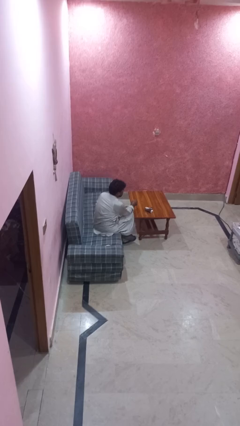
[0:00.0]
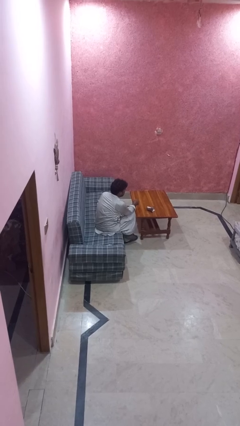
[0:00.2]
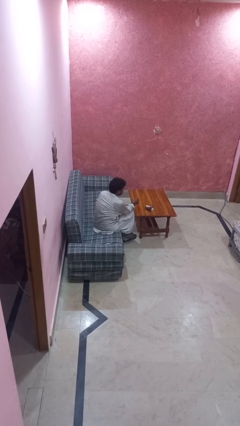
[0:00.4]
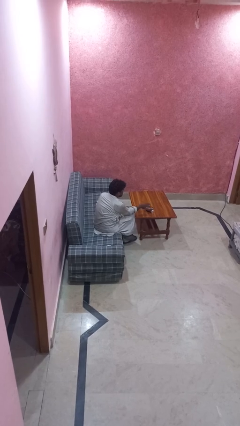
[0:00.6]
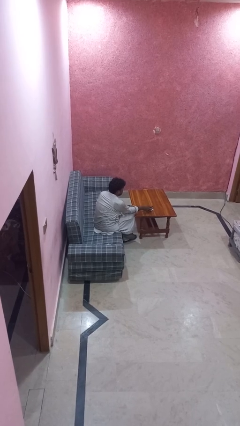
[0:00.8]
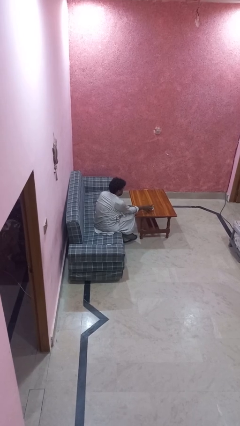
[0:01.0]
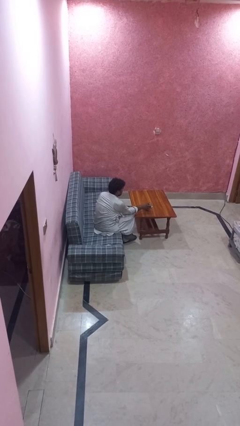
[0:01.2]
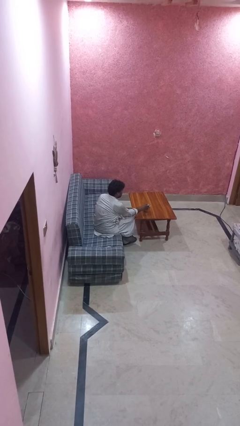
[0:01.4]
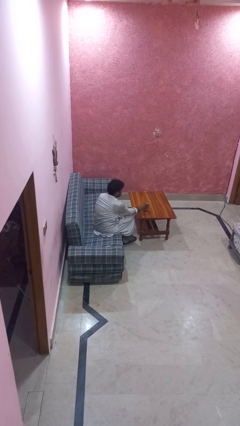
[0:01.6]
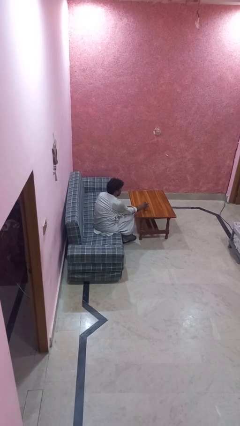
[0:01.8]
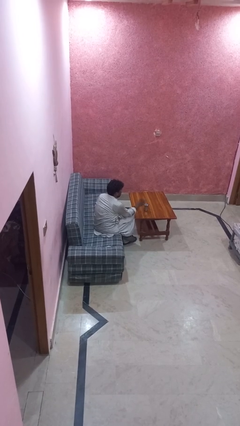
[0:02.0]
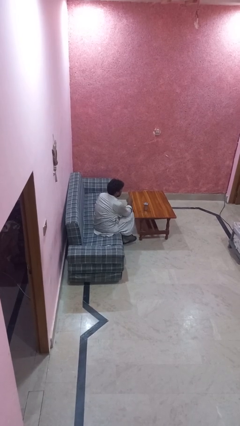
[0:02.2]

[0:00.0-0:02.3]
person sets upright glass

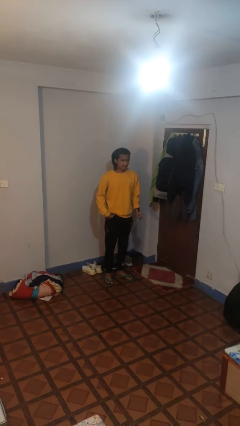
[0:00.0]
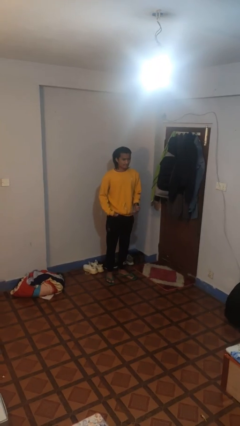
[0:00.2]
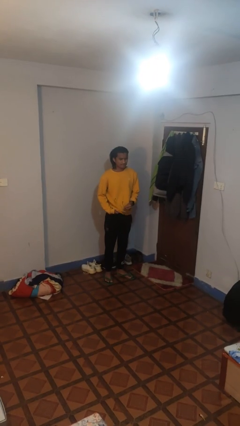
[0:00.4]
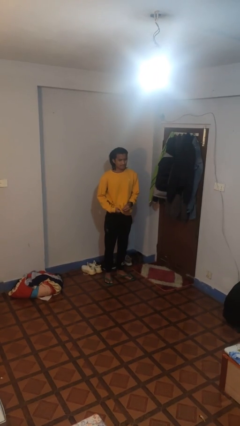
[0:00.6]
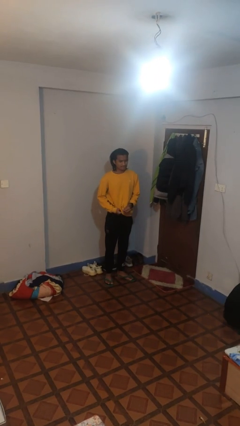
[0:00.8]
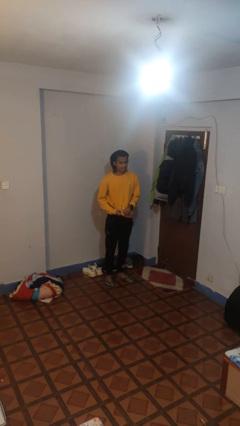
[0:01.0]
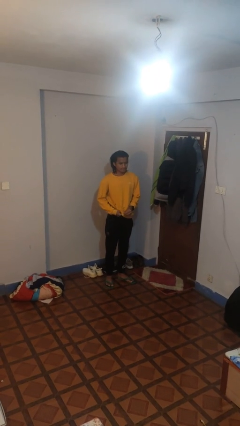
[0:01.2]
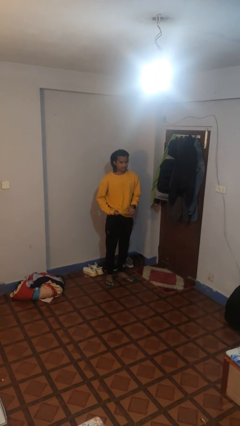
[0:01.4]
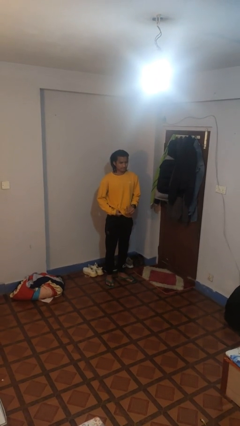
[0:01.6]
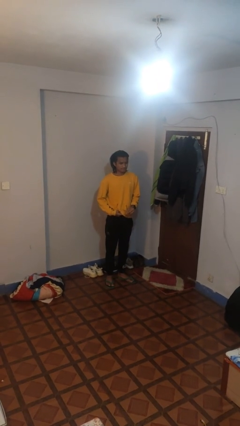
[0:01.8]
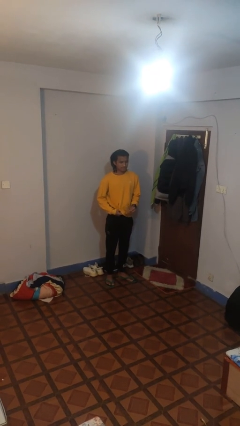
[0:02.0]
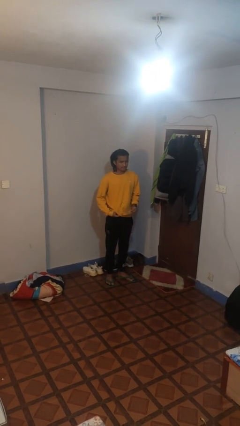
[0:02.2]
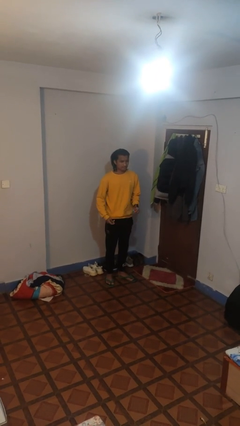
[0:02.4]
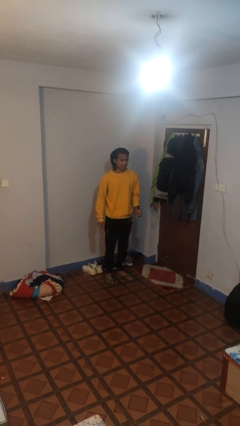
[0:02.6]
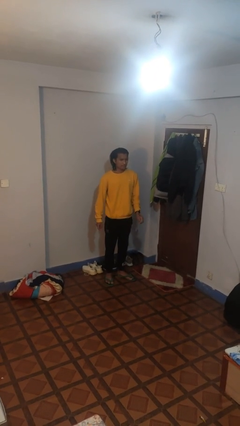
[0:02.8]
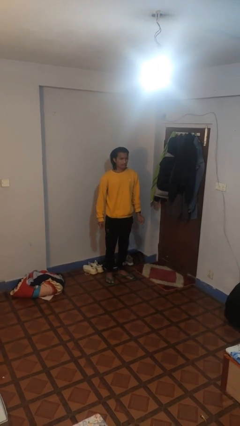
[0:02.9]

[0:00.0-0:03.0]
person cleans eyeglasses

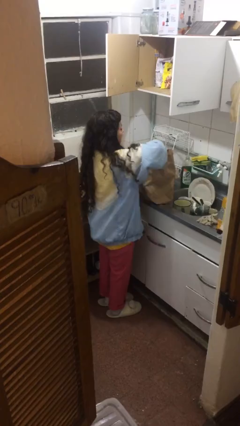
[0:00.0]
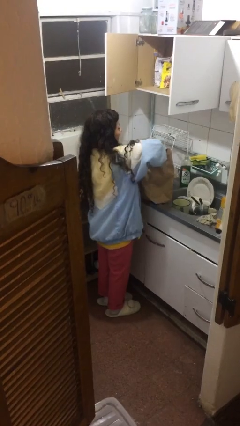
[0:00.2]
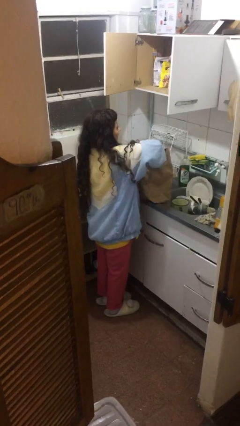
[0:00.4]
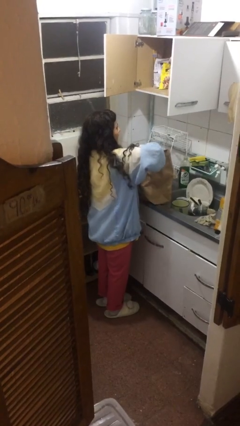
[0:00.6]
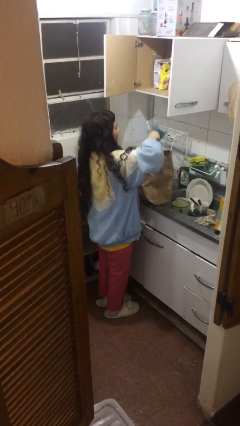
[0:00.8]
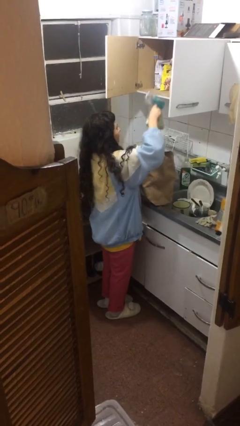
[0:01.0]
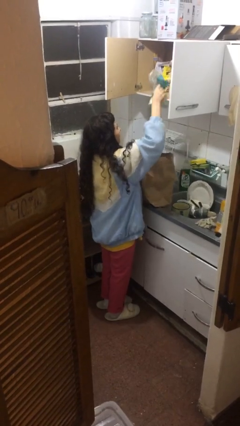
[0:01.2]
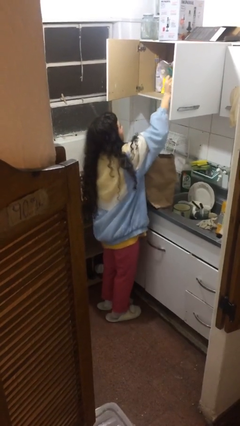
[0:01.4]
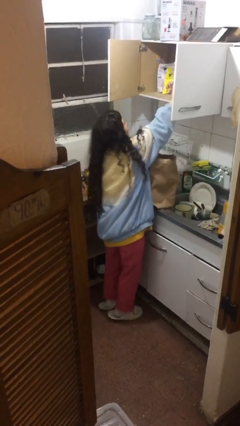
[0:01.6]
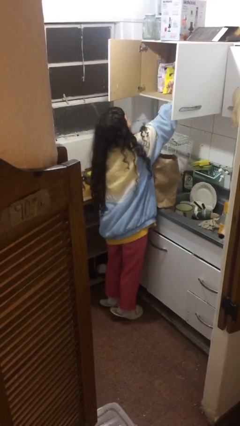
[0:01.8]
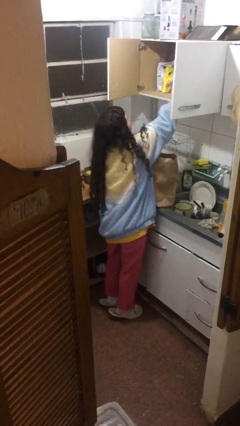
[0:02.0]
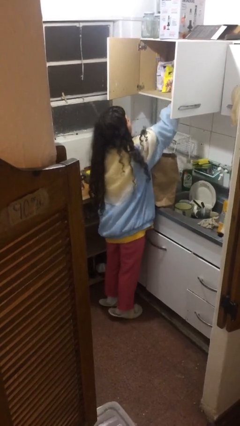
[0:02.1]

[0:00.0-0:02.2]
person loads groceries into cabinet

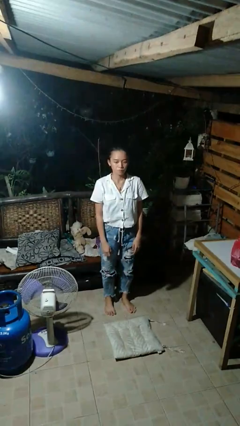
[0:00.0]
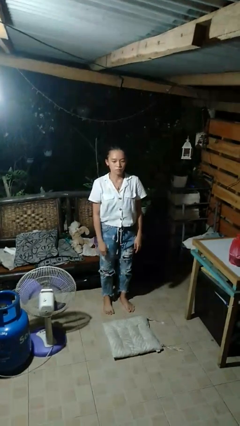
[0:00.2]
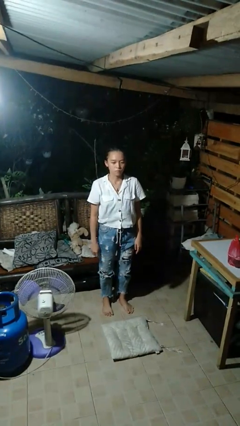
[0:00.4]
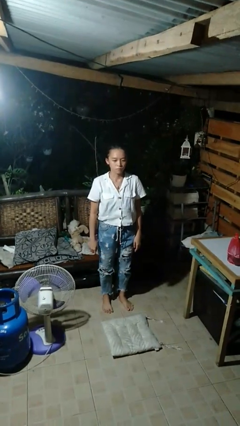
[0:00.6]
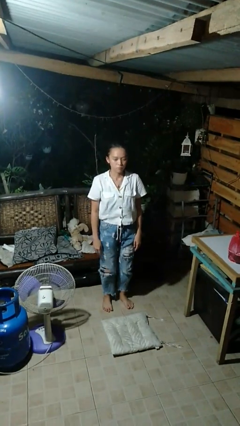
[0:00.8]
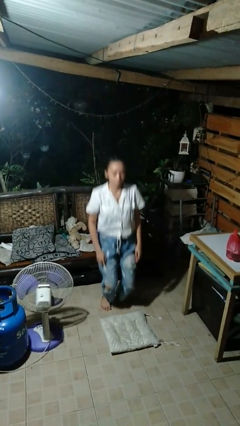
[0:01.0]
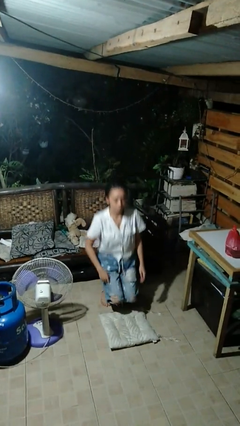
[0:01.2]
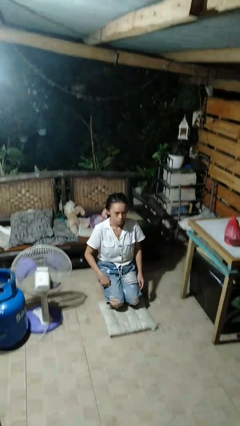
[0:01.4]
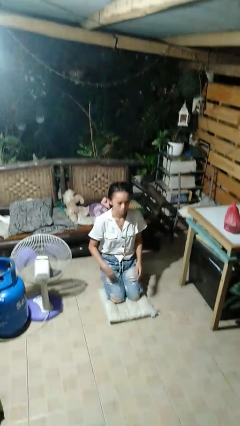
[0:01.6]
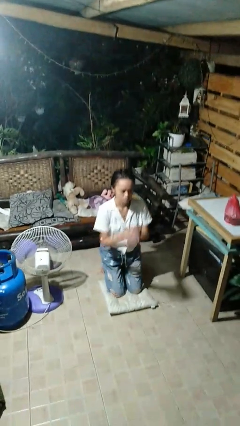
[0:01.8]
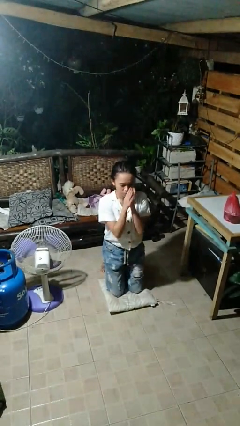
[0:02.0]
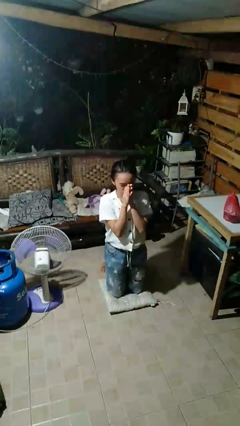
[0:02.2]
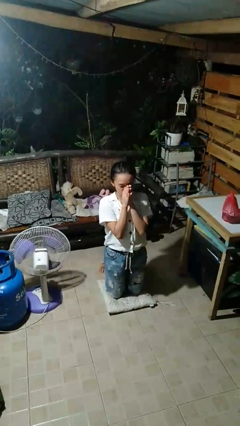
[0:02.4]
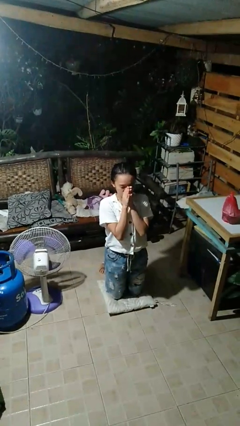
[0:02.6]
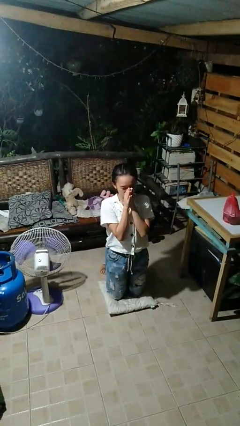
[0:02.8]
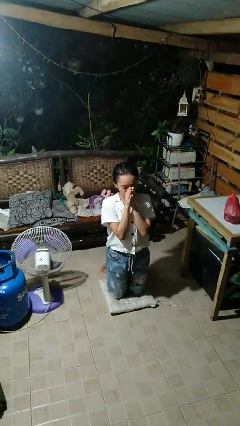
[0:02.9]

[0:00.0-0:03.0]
person prays

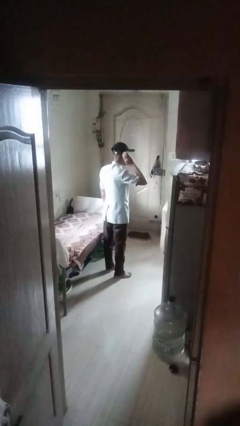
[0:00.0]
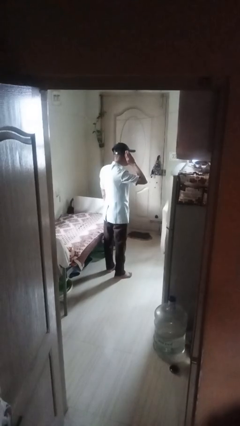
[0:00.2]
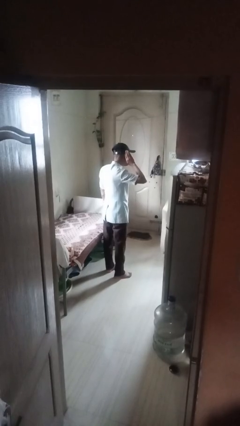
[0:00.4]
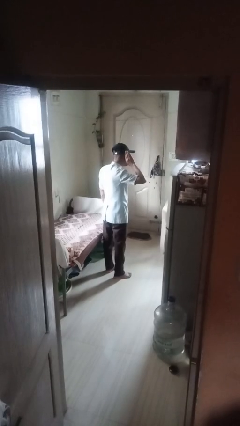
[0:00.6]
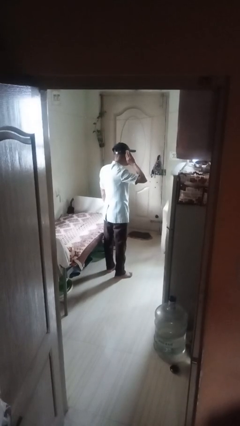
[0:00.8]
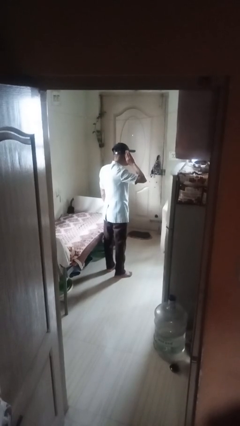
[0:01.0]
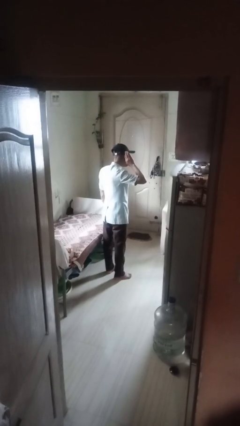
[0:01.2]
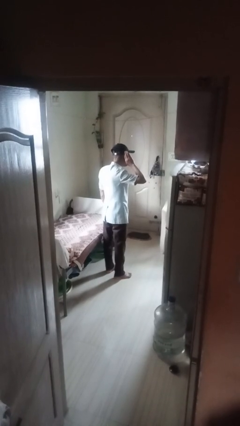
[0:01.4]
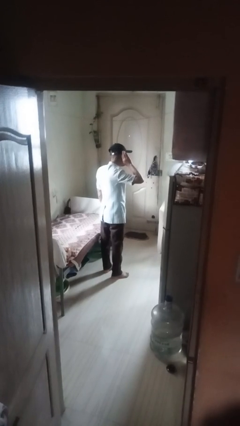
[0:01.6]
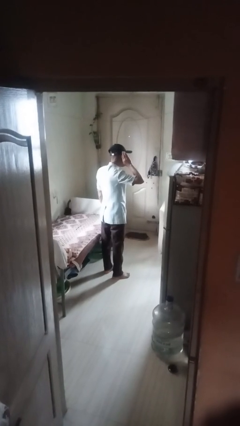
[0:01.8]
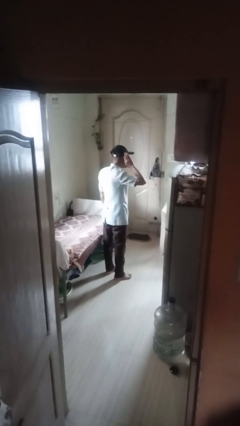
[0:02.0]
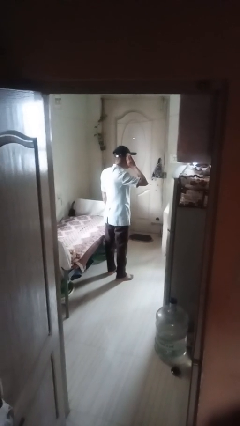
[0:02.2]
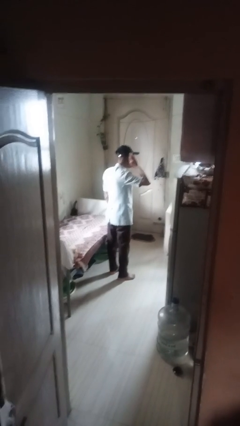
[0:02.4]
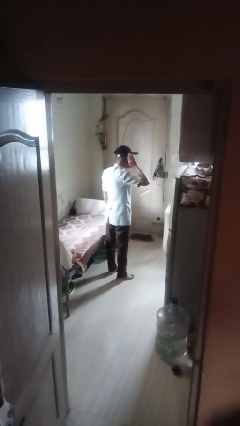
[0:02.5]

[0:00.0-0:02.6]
person gestures listen closely

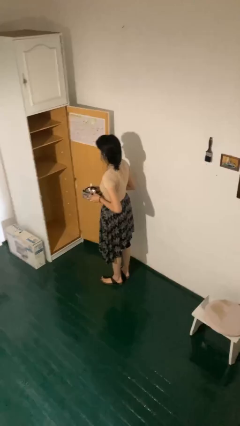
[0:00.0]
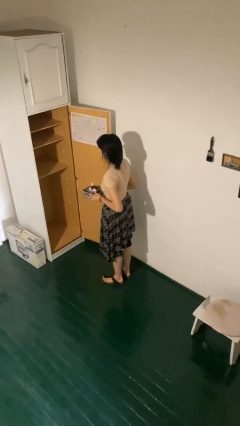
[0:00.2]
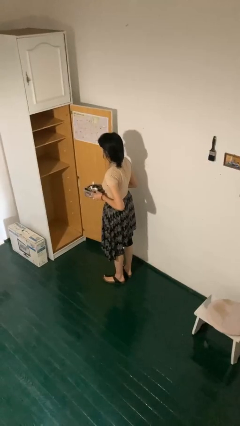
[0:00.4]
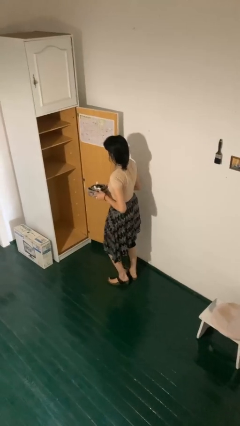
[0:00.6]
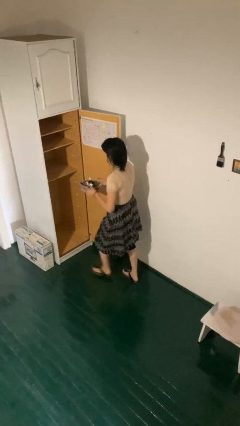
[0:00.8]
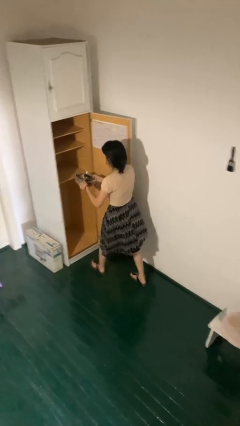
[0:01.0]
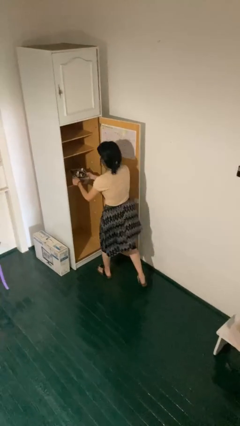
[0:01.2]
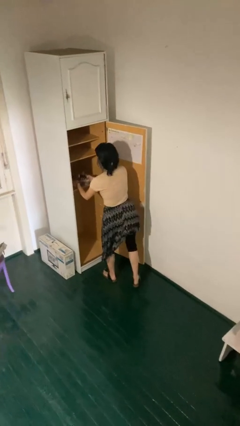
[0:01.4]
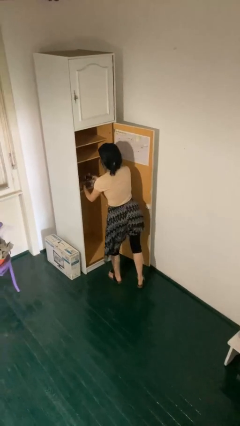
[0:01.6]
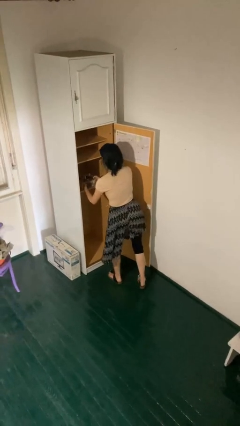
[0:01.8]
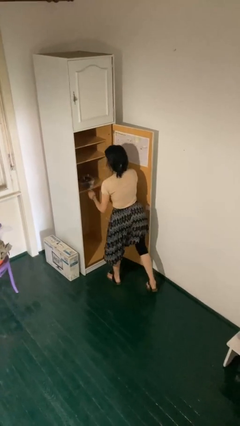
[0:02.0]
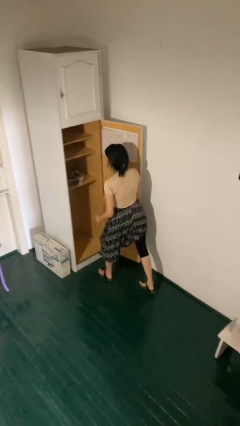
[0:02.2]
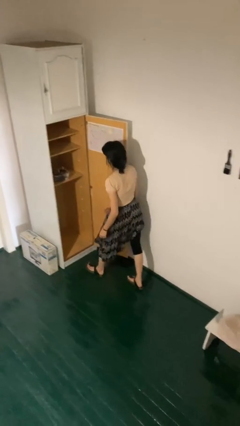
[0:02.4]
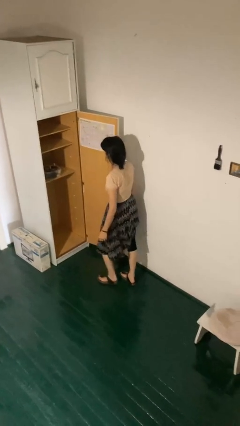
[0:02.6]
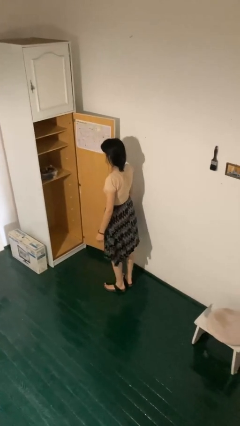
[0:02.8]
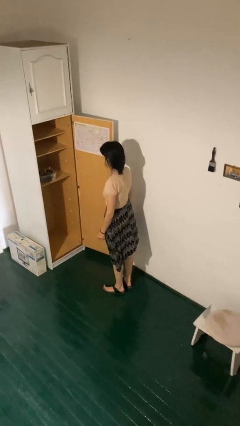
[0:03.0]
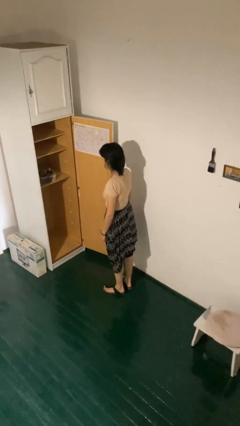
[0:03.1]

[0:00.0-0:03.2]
person puts down object into cabinet

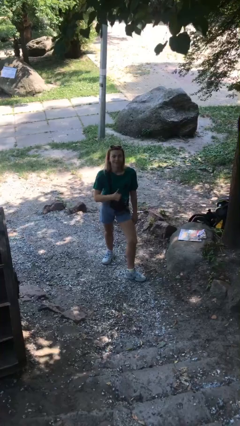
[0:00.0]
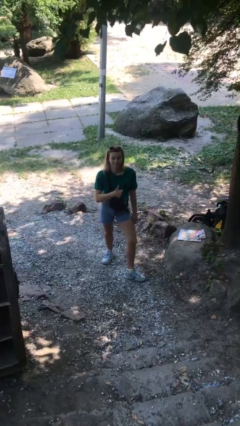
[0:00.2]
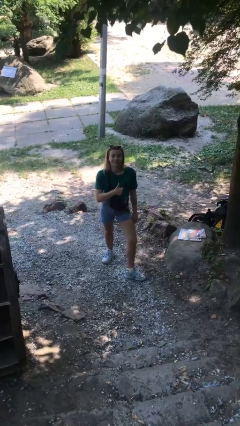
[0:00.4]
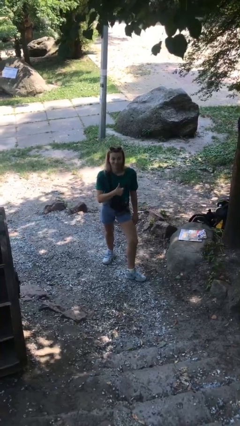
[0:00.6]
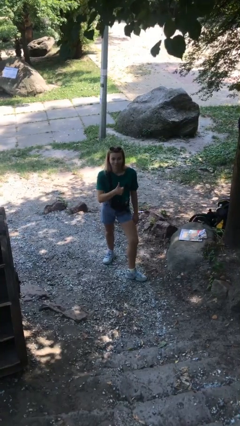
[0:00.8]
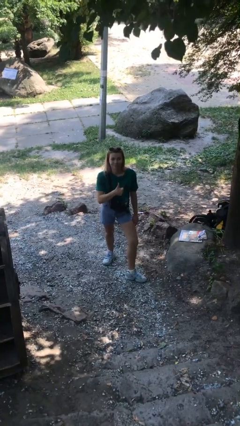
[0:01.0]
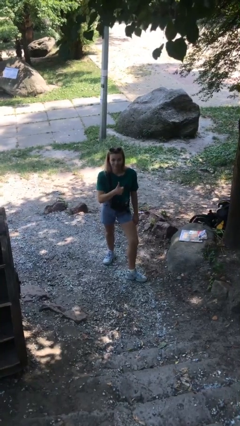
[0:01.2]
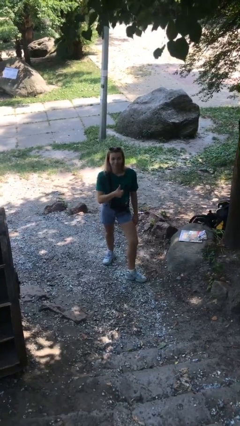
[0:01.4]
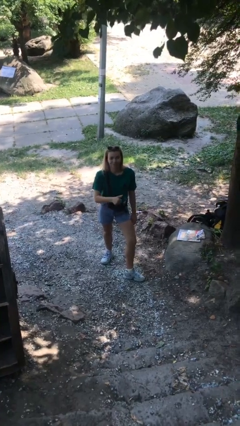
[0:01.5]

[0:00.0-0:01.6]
person gestures thumbs up
